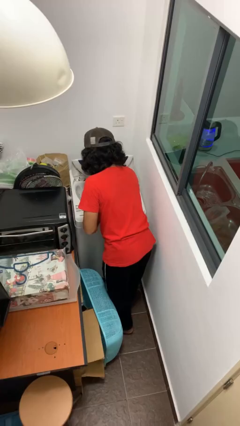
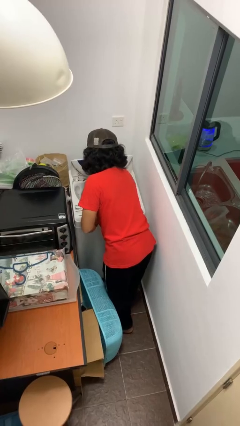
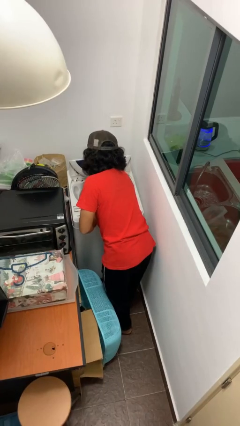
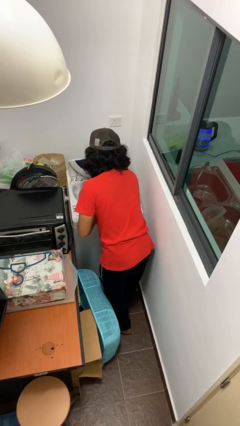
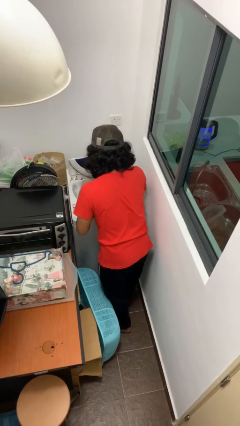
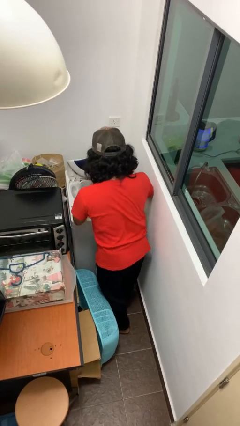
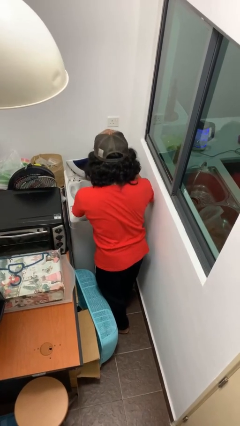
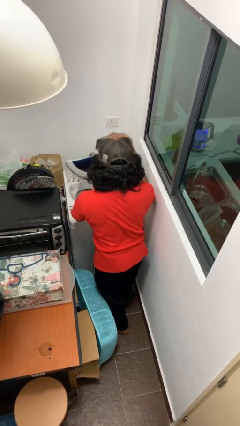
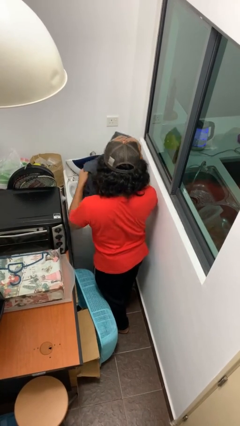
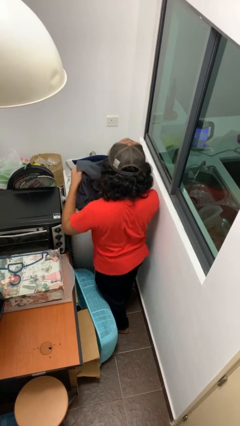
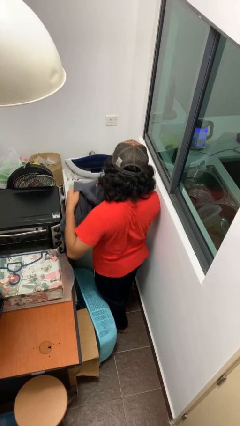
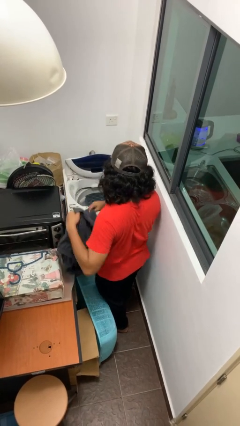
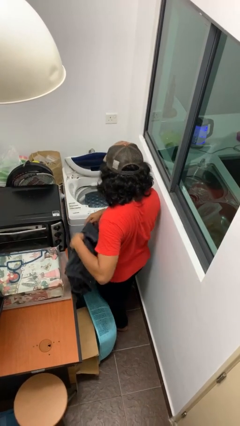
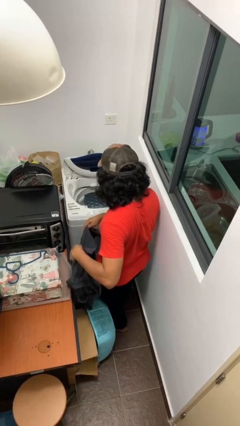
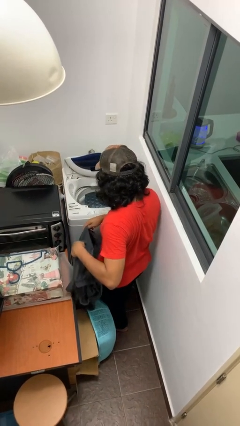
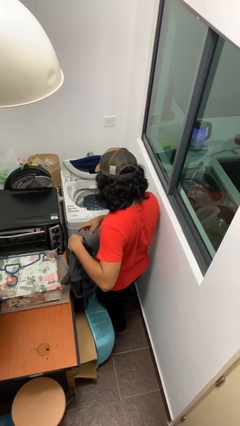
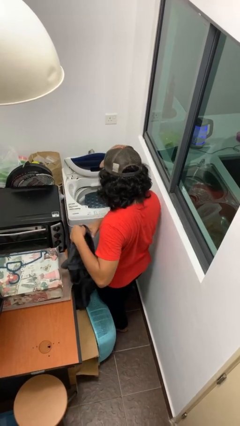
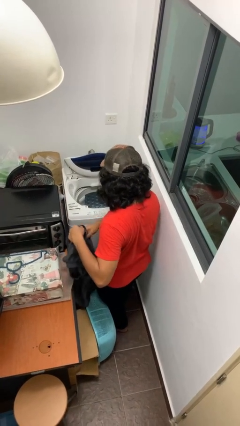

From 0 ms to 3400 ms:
person unloads clotheswasher

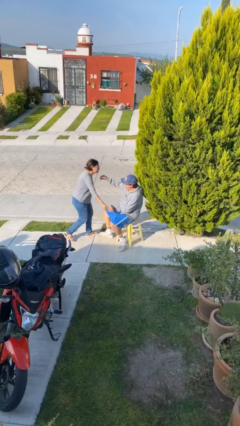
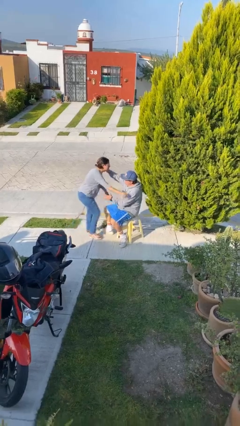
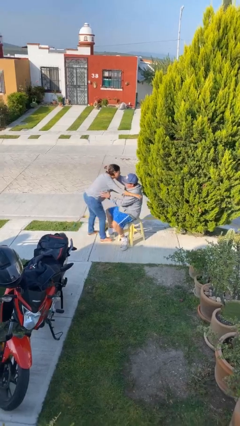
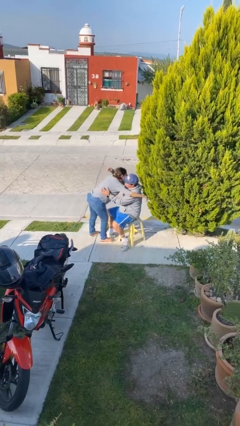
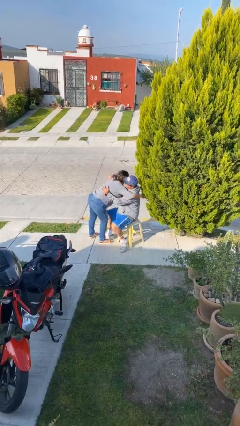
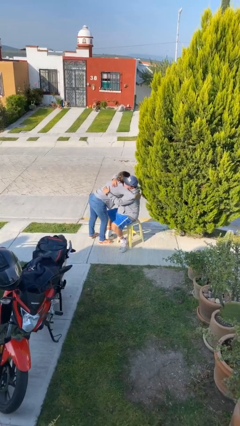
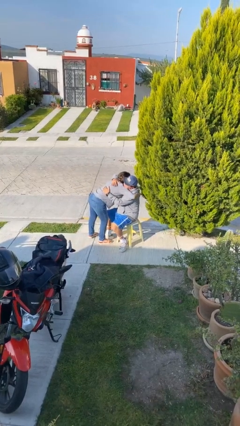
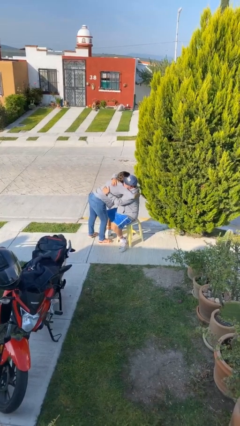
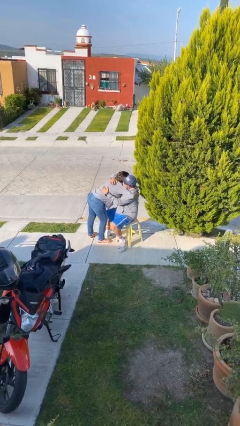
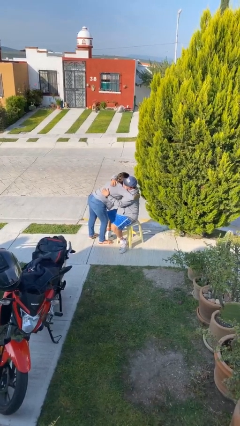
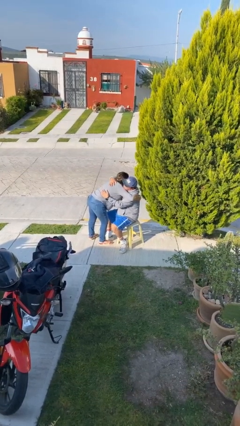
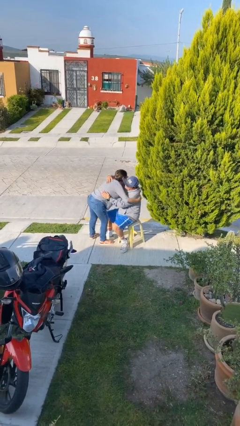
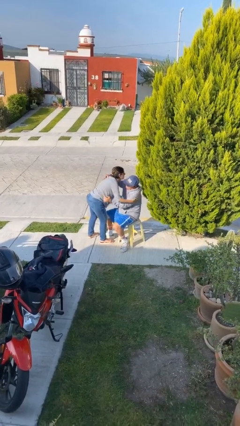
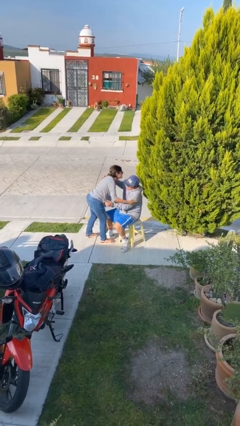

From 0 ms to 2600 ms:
person embraces person

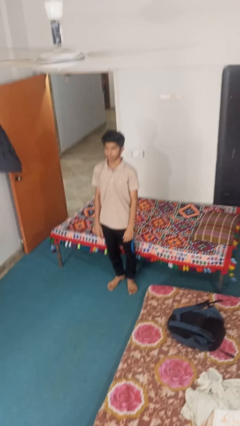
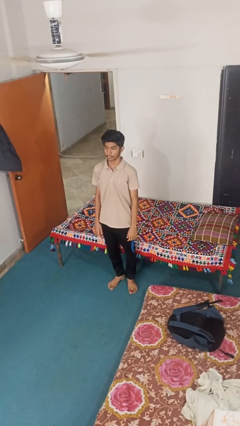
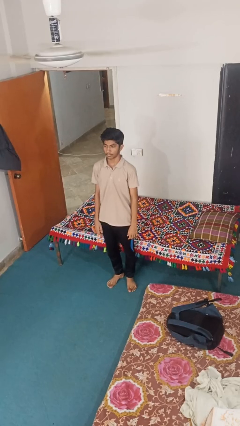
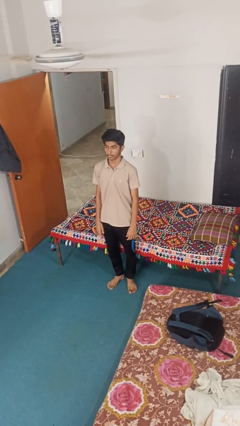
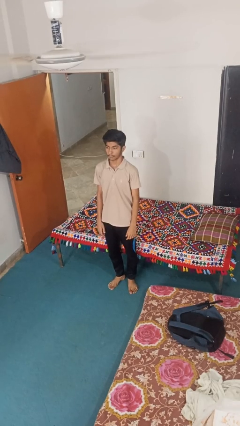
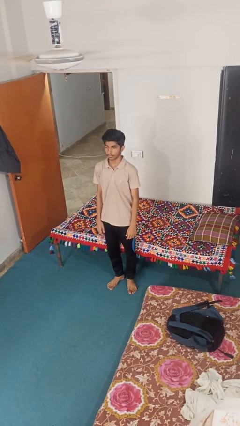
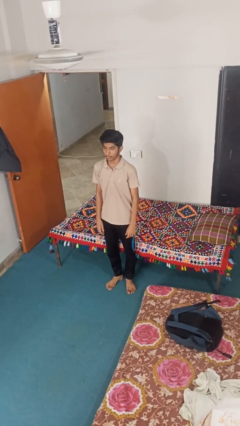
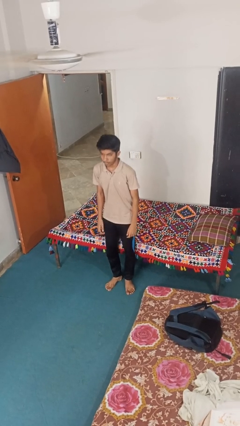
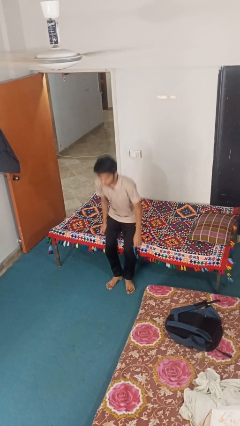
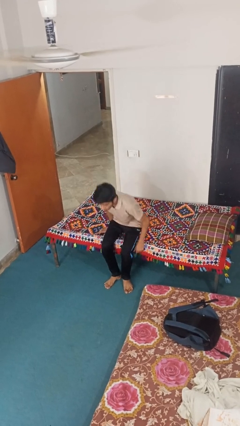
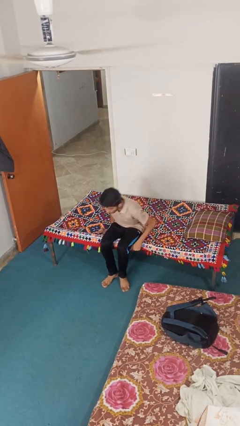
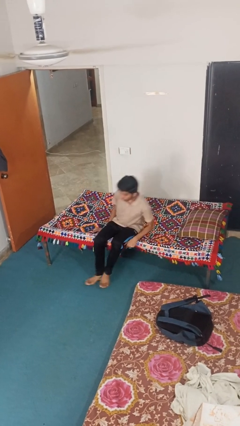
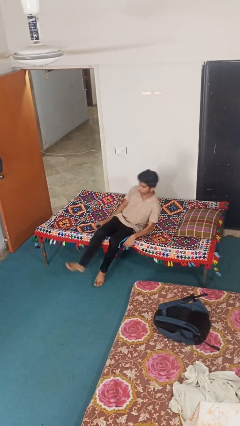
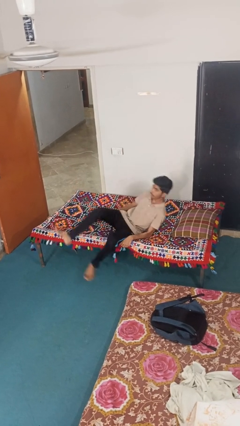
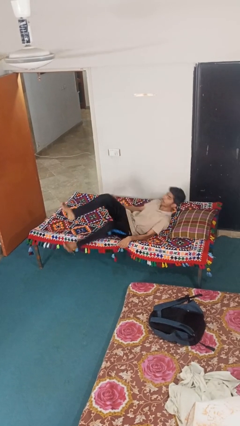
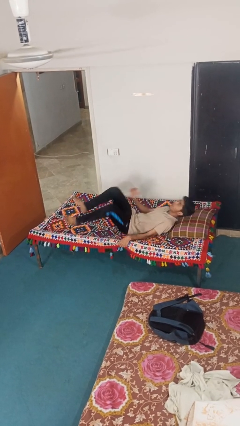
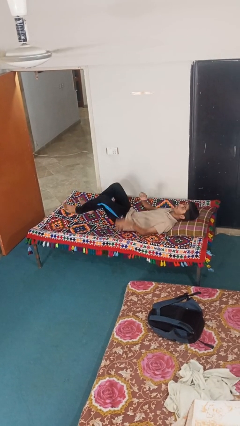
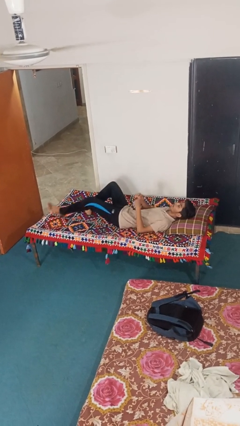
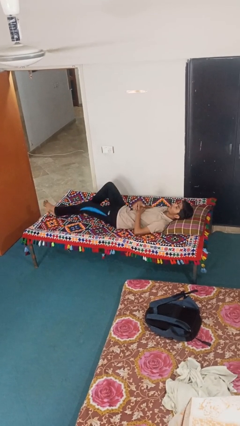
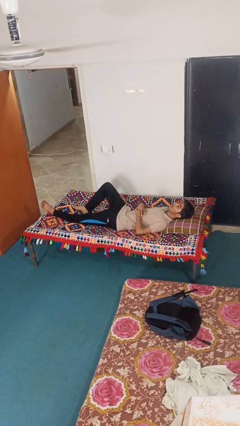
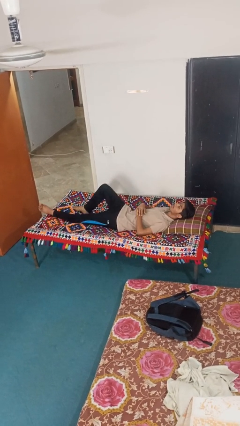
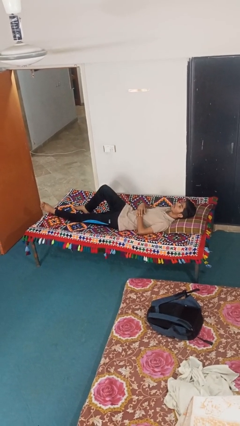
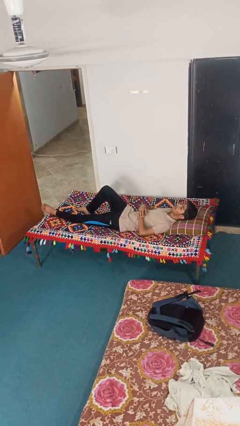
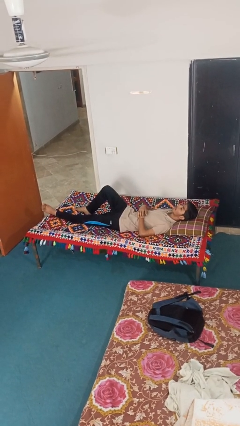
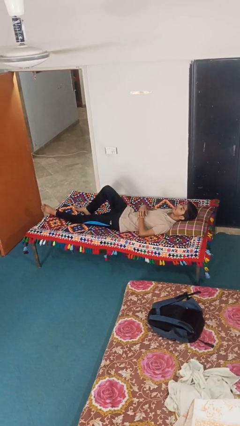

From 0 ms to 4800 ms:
person lies down on bed

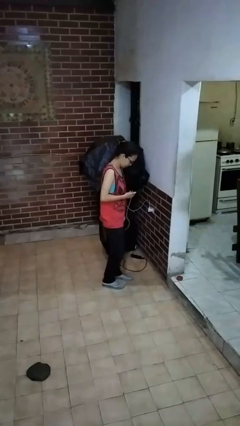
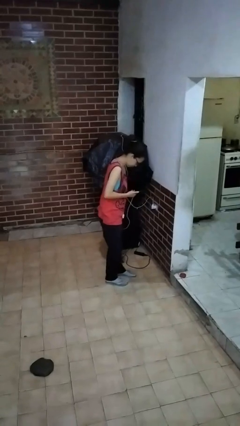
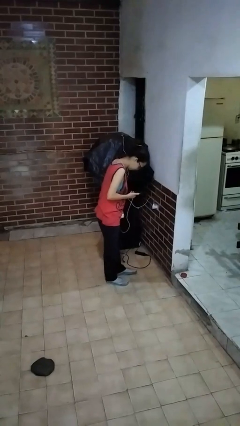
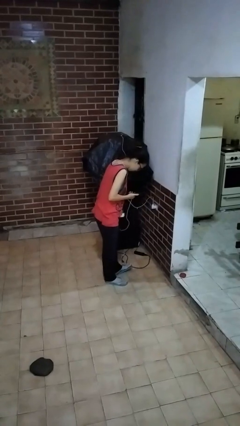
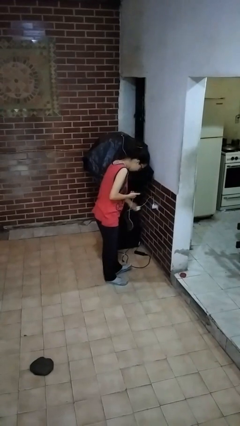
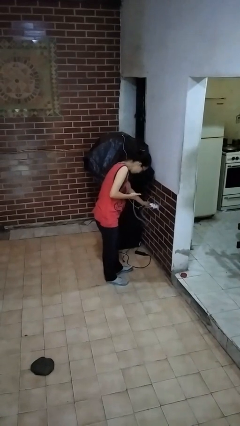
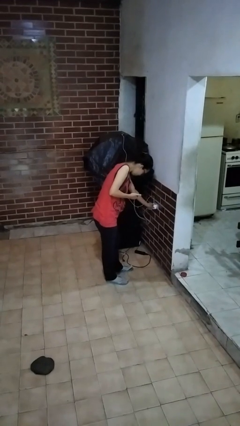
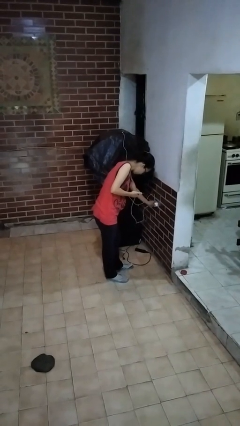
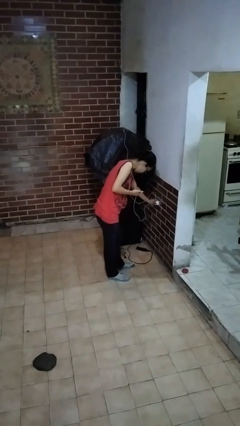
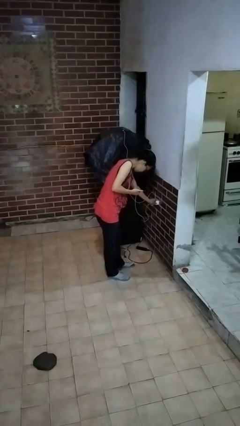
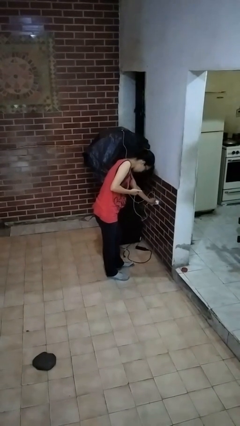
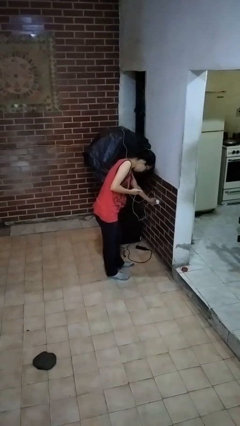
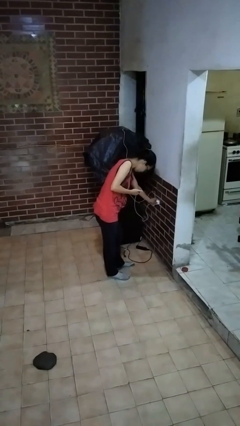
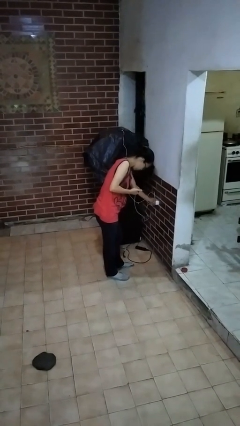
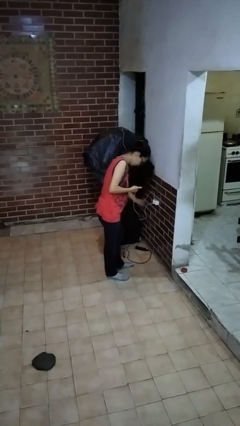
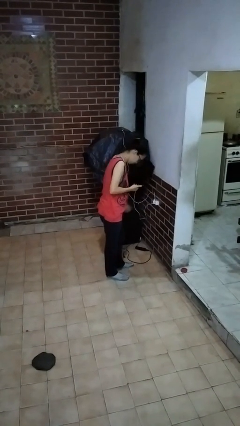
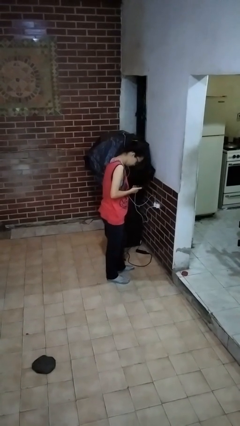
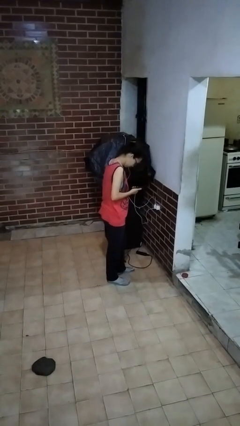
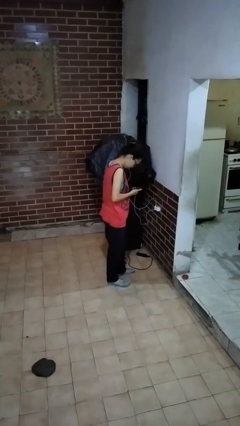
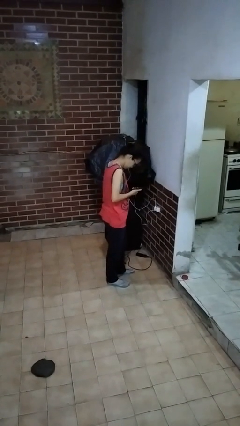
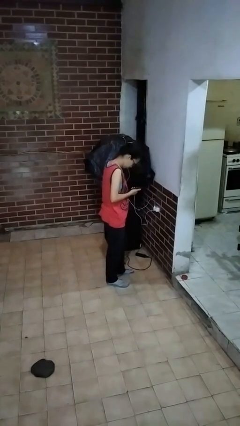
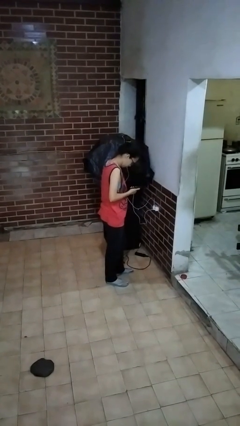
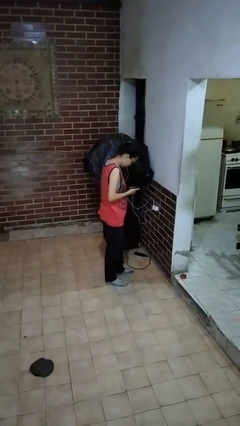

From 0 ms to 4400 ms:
person plugs into electrical socket

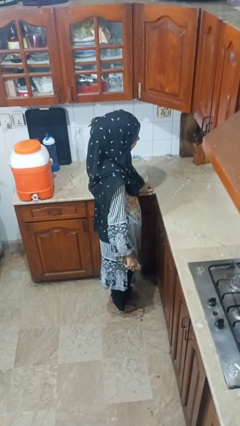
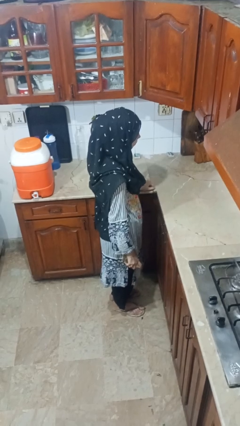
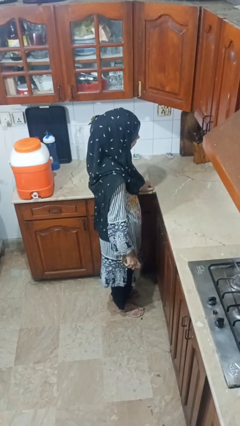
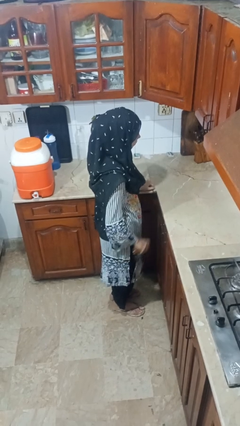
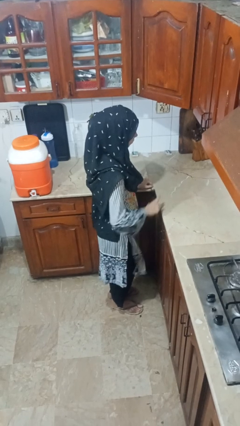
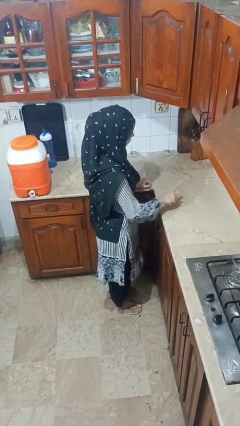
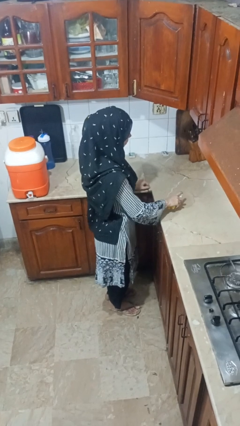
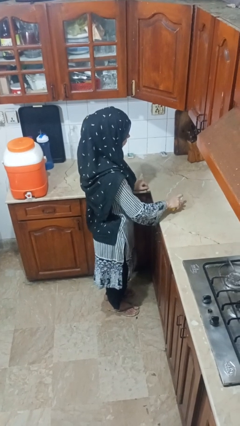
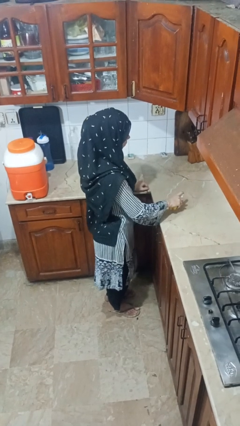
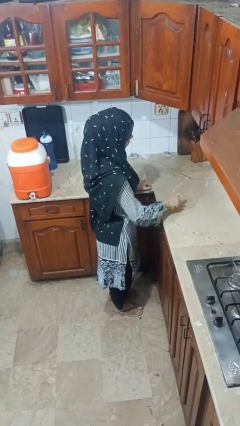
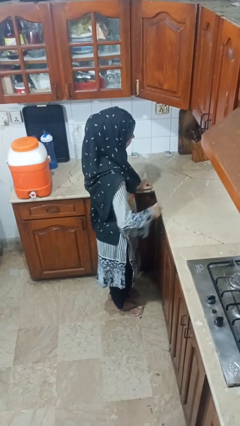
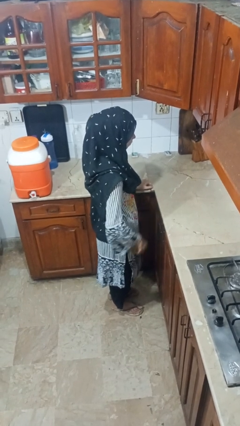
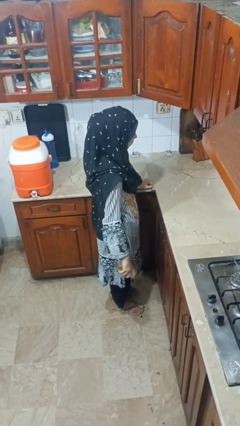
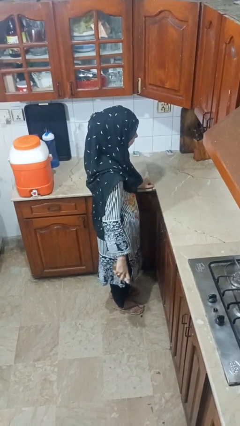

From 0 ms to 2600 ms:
person sprays from bottle
